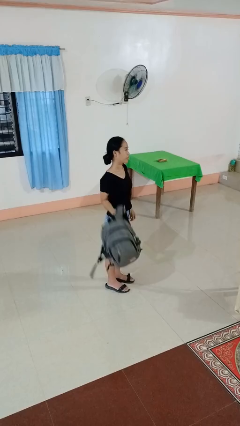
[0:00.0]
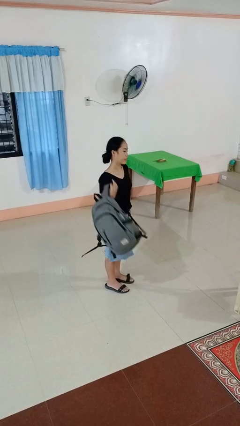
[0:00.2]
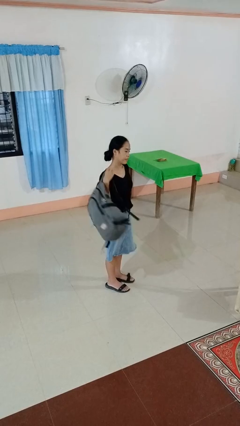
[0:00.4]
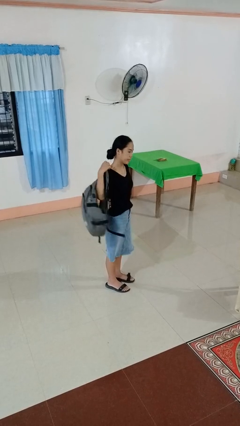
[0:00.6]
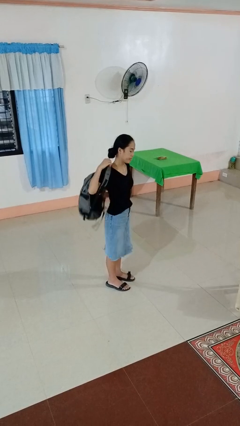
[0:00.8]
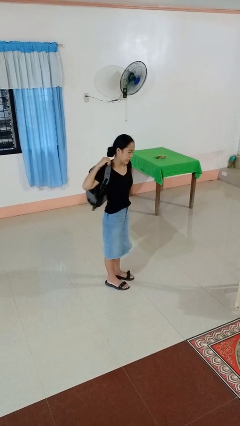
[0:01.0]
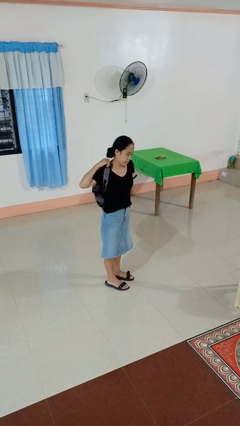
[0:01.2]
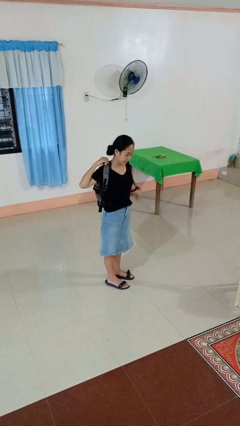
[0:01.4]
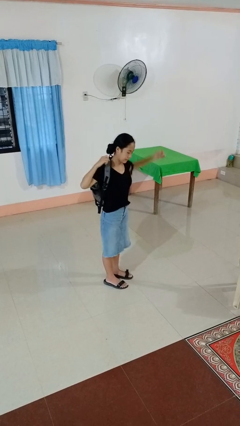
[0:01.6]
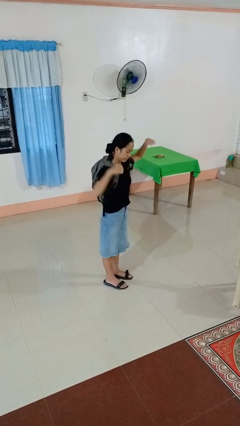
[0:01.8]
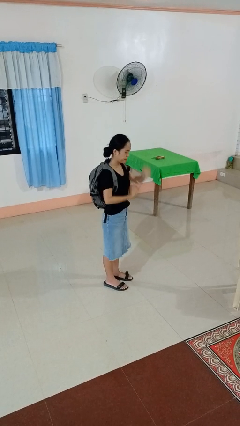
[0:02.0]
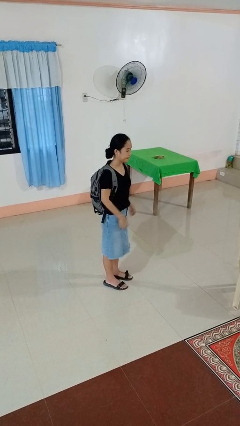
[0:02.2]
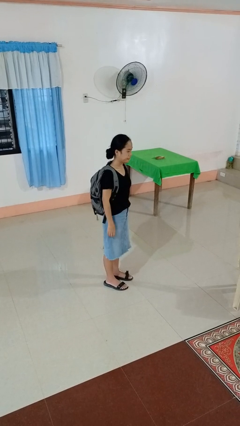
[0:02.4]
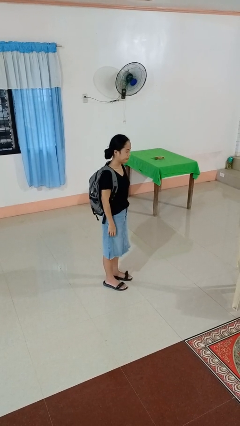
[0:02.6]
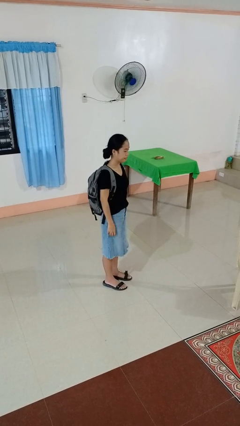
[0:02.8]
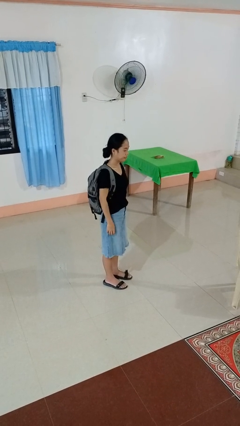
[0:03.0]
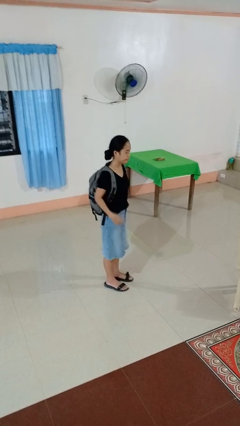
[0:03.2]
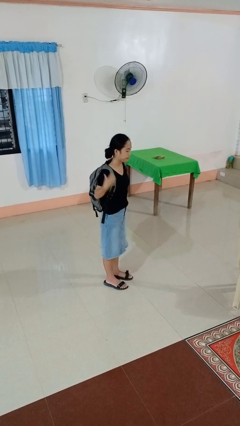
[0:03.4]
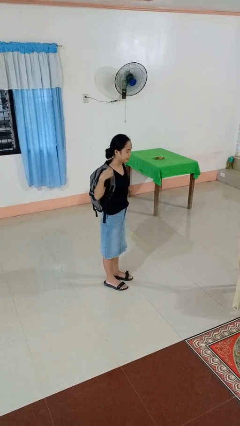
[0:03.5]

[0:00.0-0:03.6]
person puts on backpack

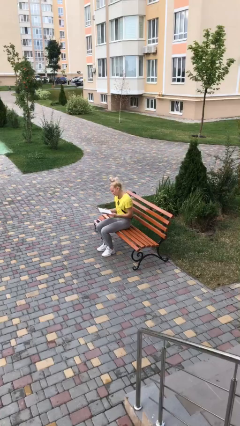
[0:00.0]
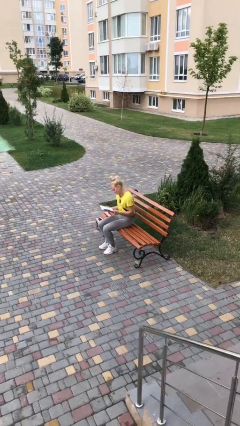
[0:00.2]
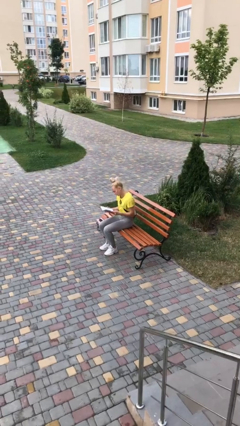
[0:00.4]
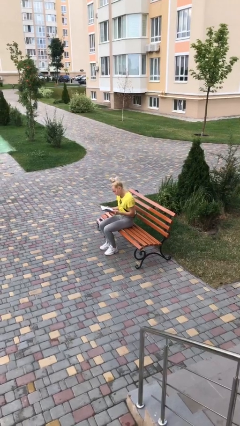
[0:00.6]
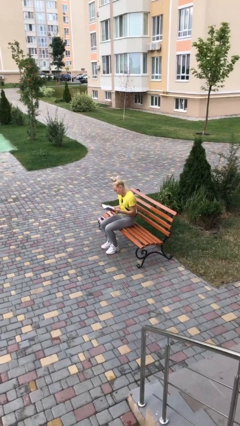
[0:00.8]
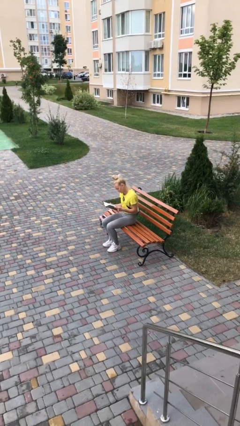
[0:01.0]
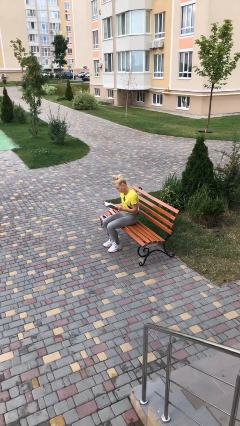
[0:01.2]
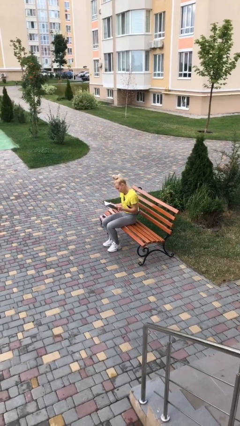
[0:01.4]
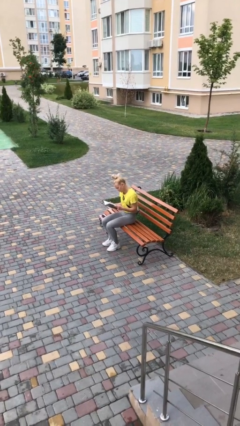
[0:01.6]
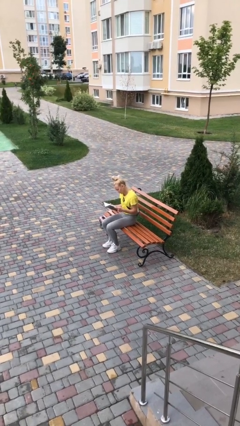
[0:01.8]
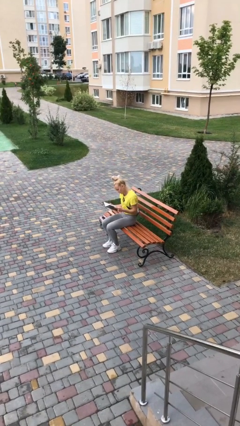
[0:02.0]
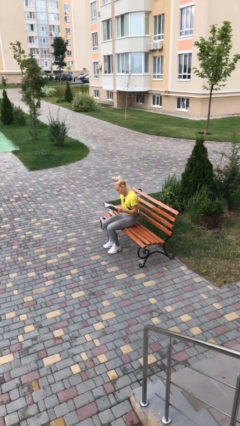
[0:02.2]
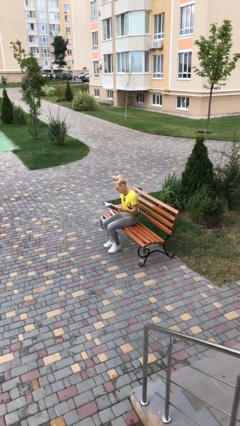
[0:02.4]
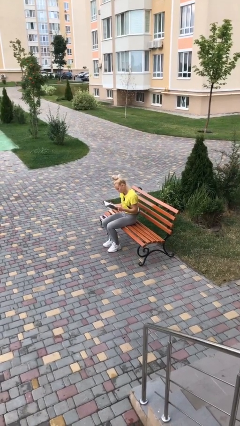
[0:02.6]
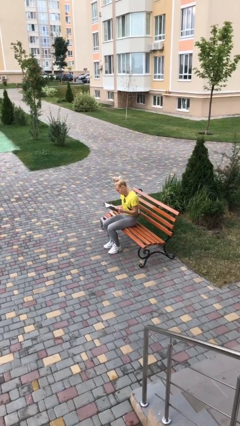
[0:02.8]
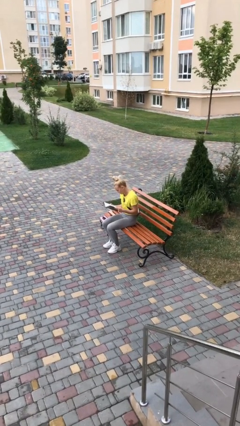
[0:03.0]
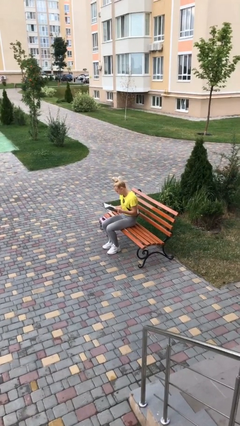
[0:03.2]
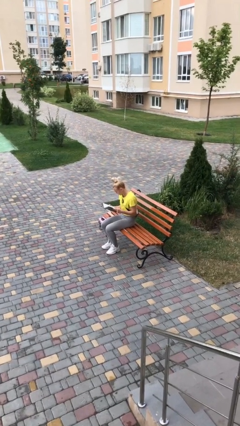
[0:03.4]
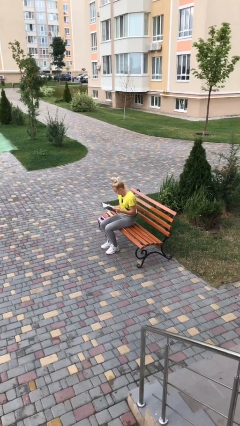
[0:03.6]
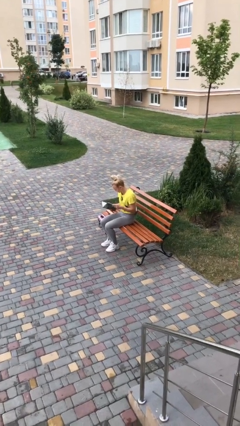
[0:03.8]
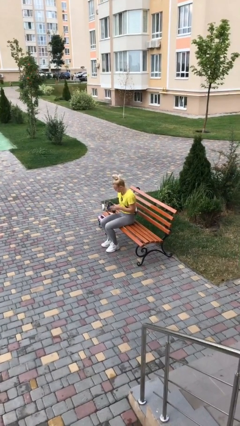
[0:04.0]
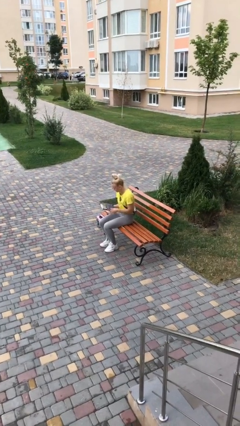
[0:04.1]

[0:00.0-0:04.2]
person reads document

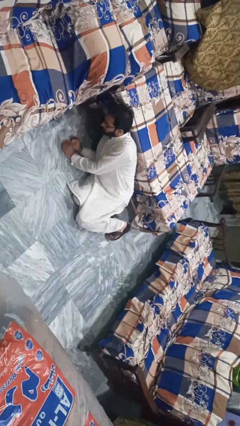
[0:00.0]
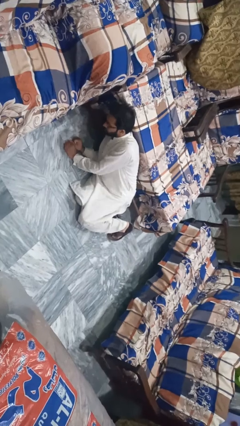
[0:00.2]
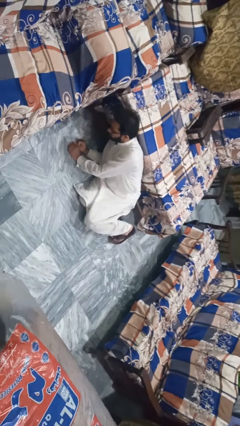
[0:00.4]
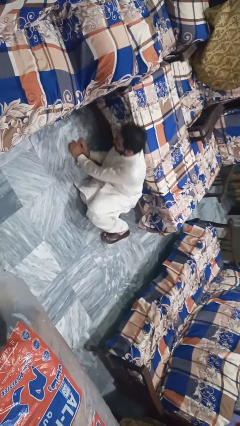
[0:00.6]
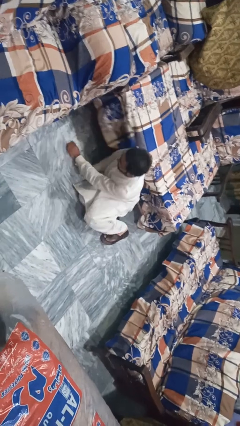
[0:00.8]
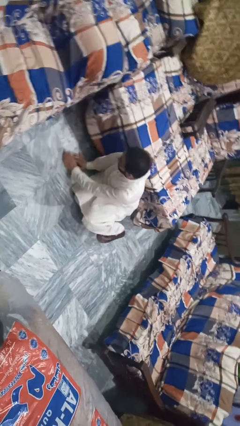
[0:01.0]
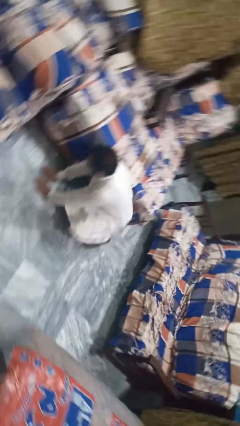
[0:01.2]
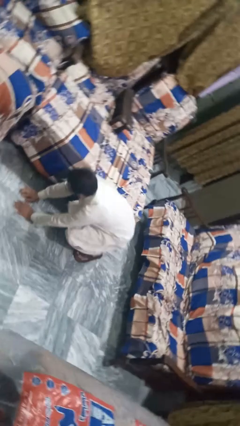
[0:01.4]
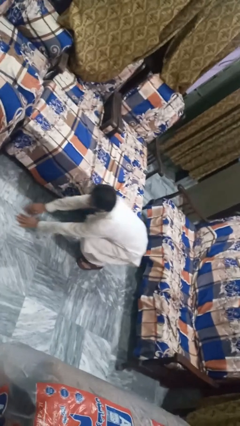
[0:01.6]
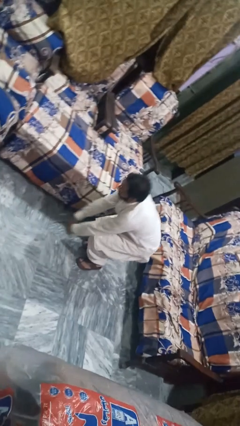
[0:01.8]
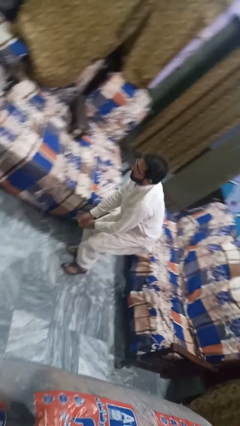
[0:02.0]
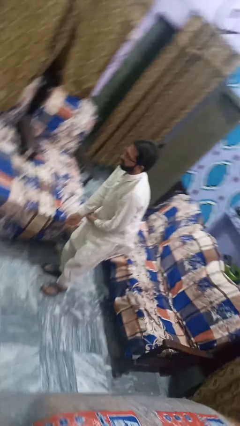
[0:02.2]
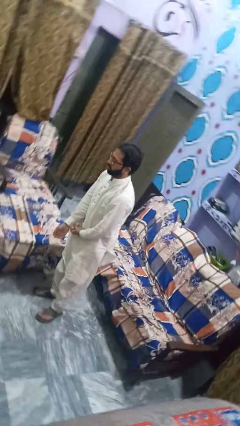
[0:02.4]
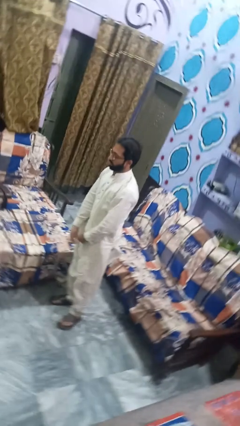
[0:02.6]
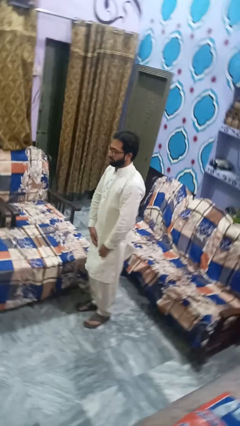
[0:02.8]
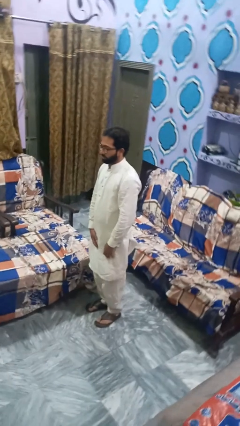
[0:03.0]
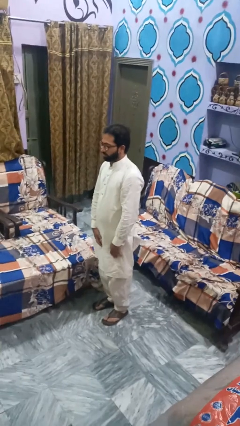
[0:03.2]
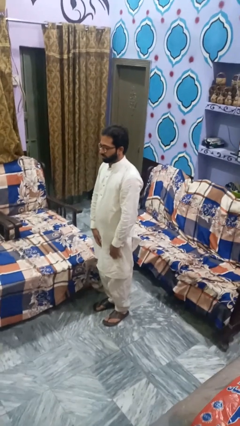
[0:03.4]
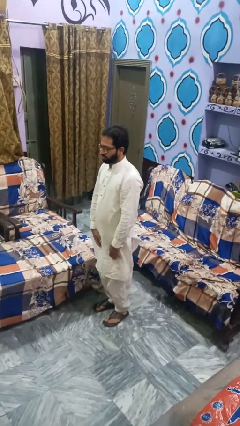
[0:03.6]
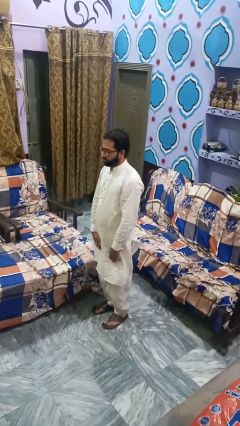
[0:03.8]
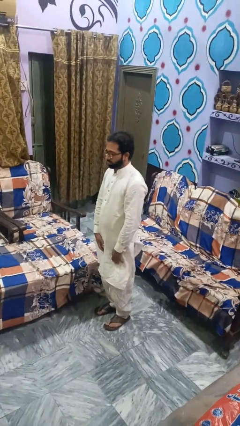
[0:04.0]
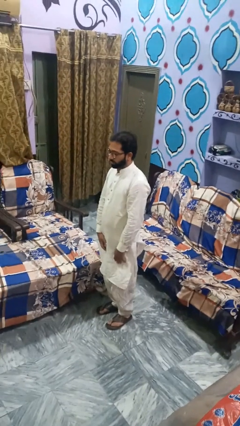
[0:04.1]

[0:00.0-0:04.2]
person stands up from floor

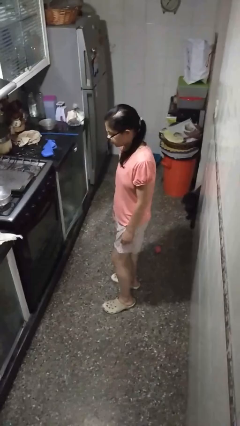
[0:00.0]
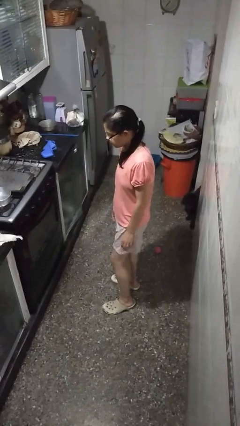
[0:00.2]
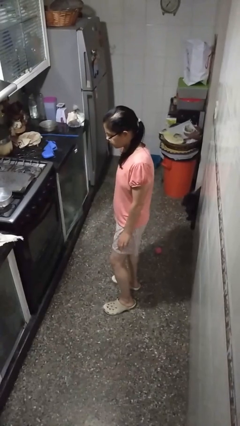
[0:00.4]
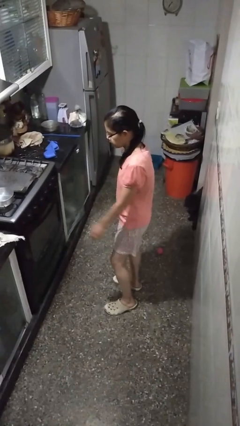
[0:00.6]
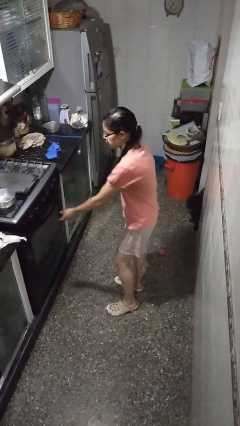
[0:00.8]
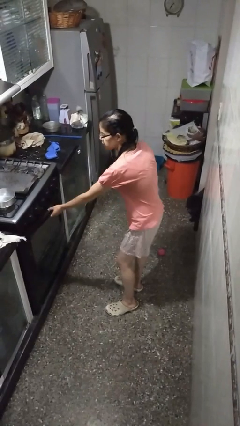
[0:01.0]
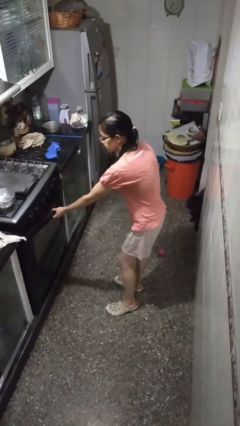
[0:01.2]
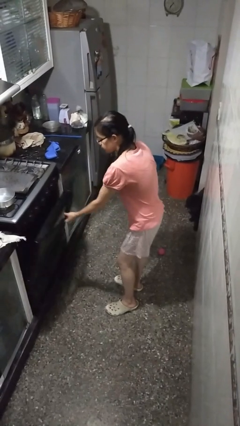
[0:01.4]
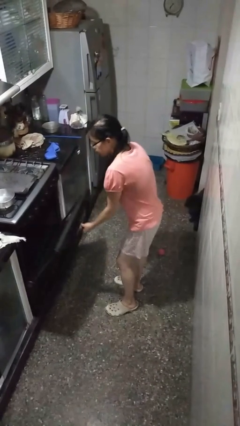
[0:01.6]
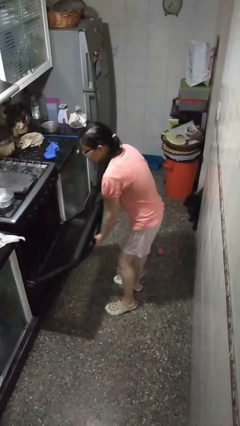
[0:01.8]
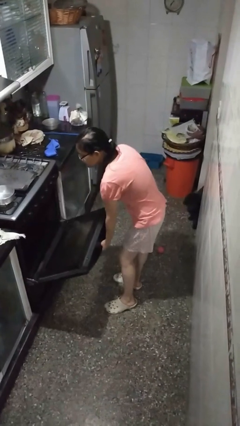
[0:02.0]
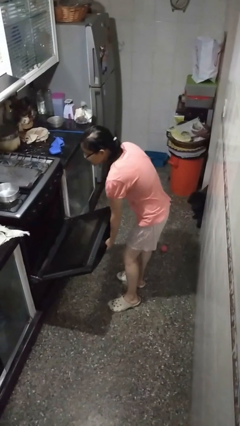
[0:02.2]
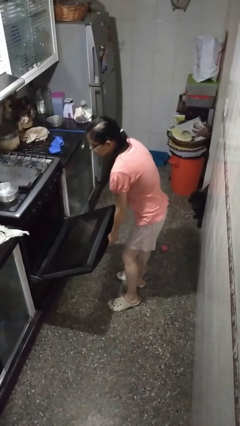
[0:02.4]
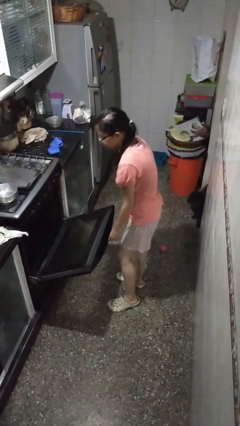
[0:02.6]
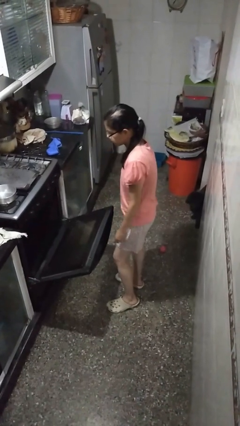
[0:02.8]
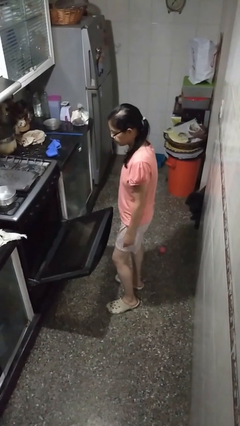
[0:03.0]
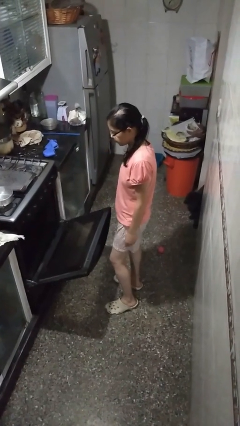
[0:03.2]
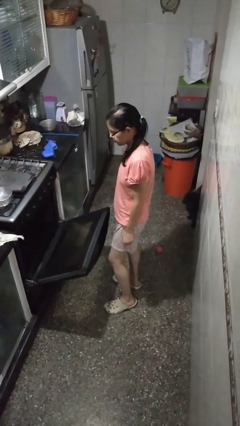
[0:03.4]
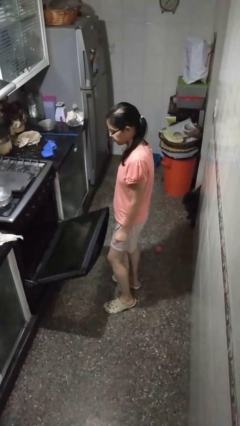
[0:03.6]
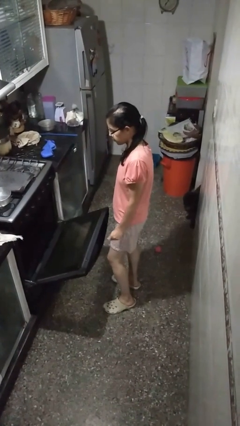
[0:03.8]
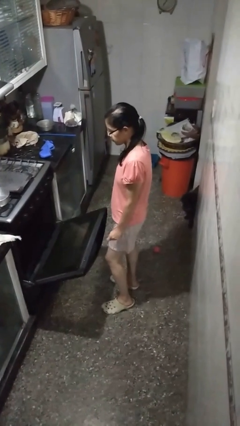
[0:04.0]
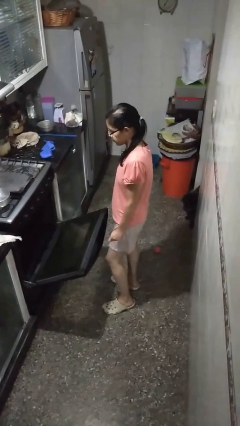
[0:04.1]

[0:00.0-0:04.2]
person opens oven door

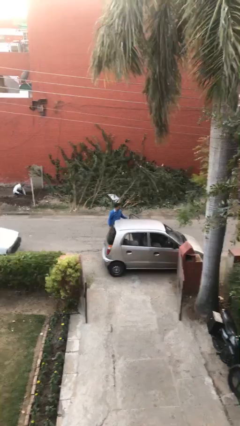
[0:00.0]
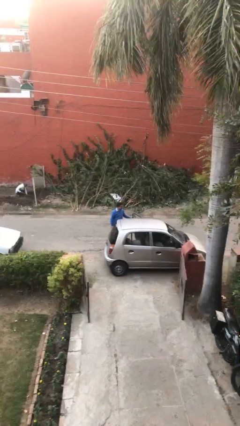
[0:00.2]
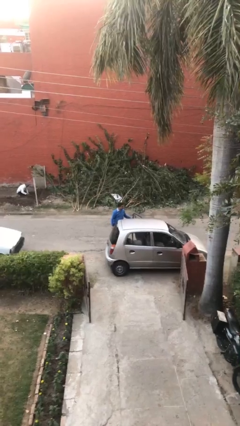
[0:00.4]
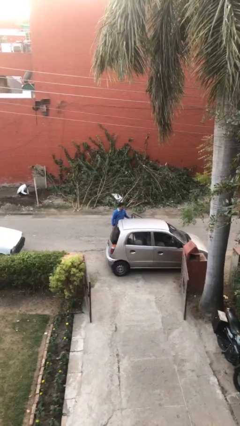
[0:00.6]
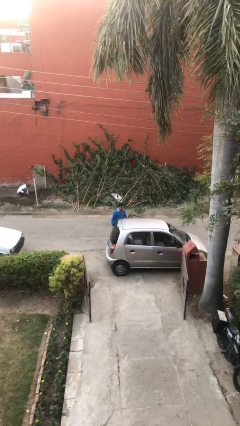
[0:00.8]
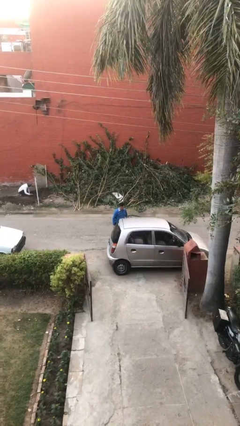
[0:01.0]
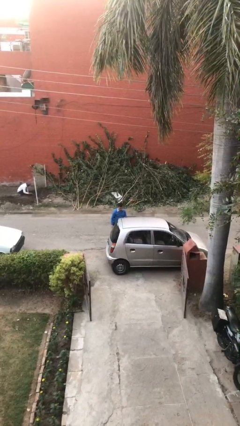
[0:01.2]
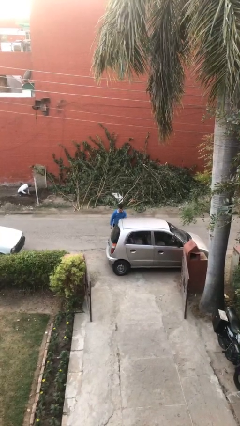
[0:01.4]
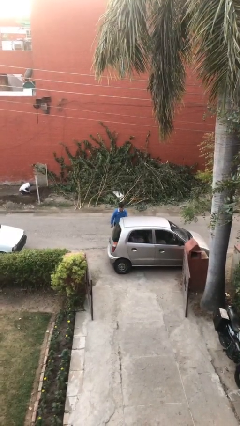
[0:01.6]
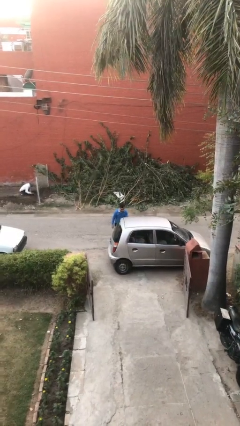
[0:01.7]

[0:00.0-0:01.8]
person closes car door
